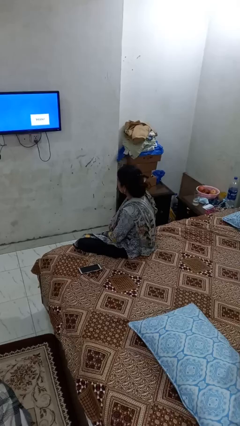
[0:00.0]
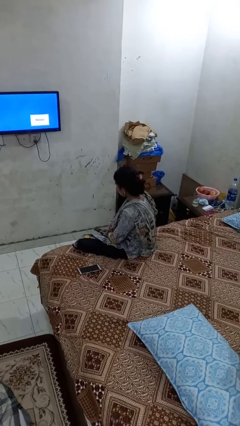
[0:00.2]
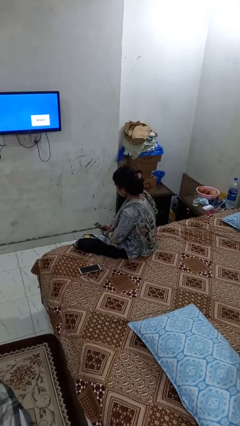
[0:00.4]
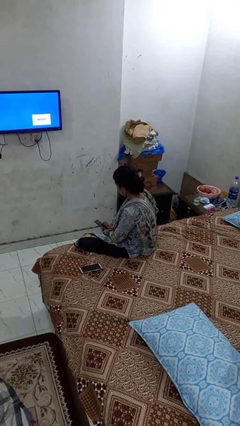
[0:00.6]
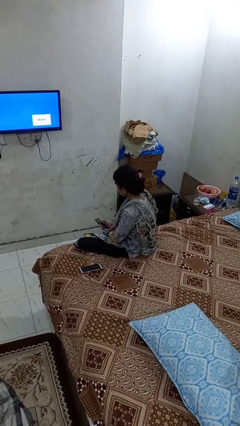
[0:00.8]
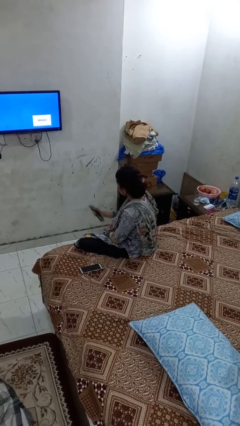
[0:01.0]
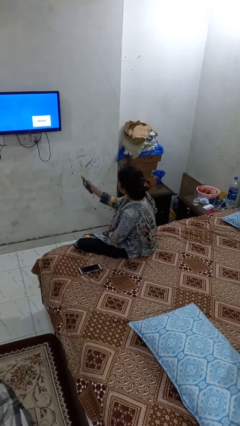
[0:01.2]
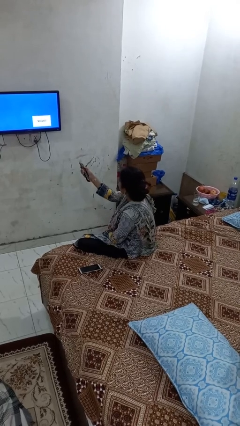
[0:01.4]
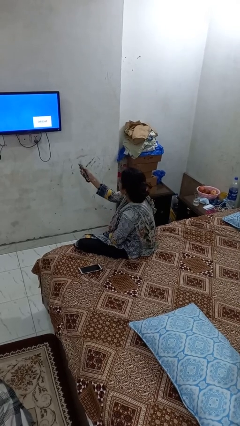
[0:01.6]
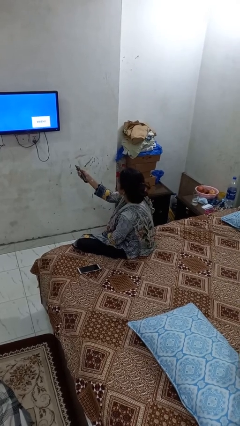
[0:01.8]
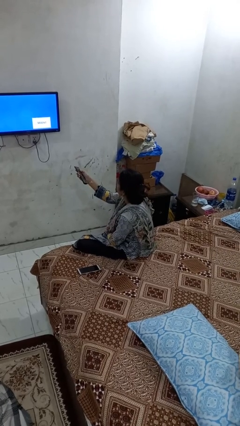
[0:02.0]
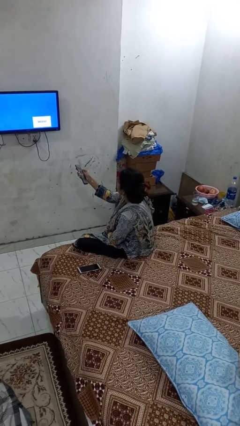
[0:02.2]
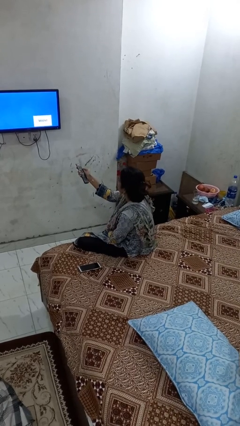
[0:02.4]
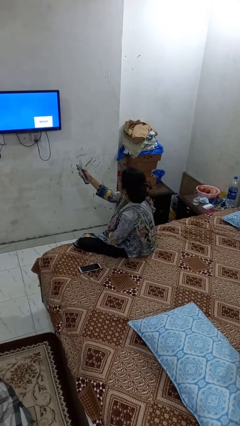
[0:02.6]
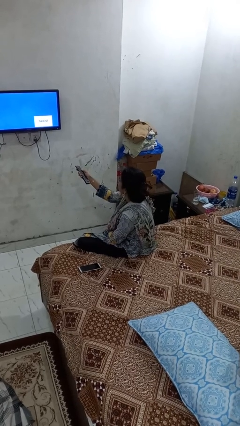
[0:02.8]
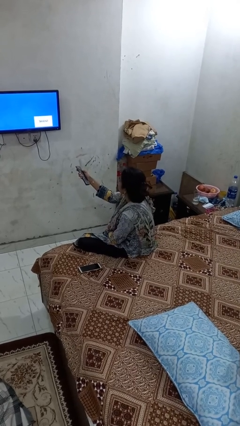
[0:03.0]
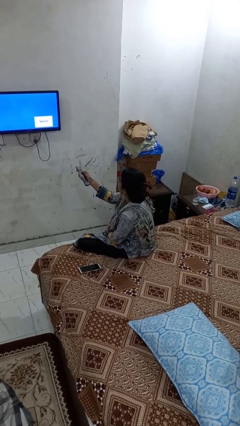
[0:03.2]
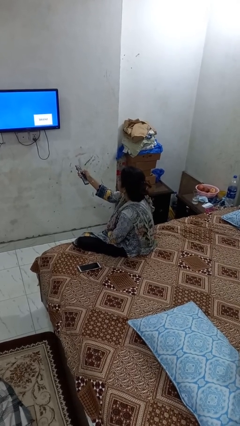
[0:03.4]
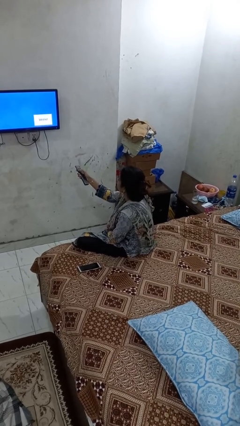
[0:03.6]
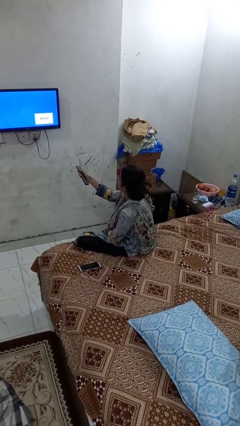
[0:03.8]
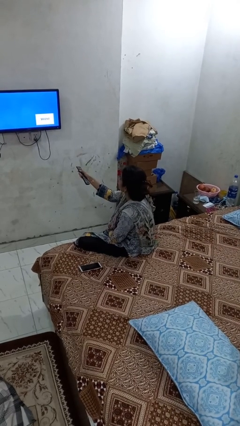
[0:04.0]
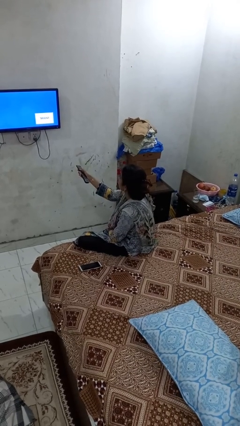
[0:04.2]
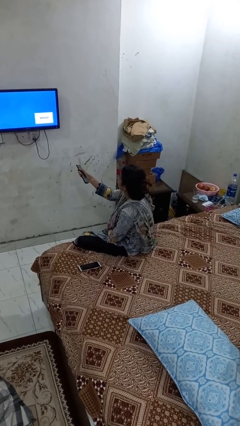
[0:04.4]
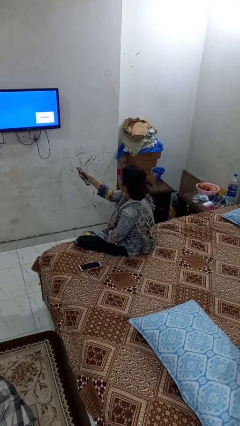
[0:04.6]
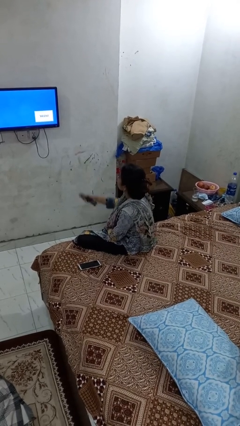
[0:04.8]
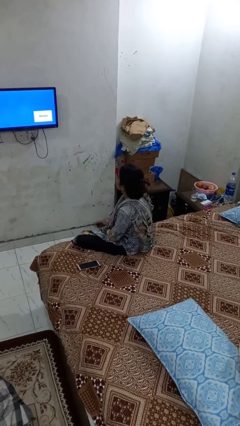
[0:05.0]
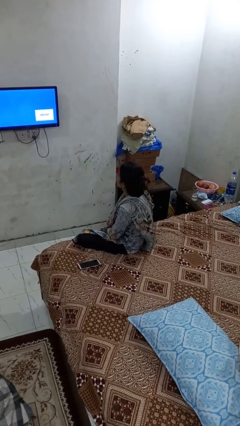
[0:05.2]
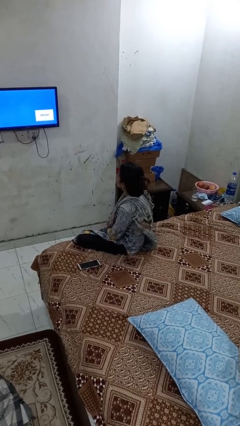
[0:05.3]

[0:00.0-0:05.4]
person uses television remote

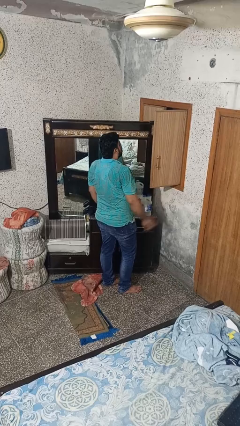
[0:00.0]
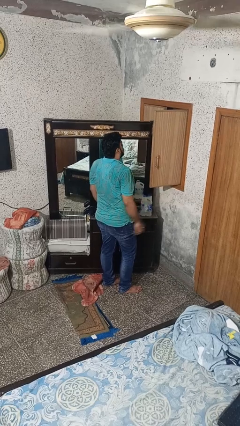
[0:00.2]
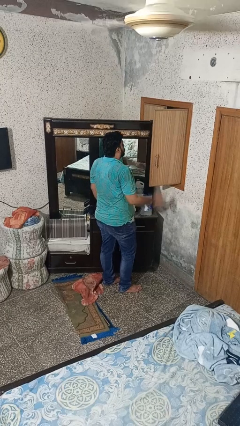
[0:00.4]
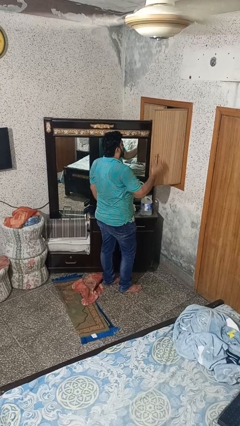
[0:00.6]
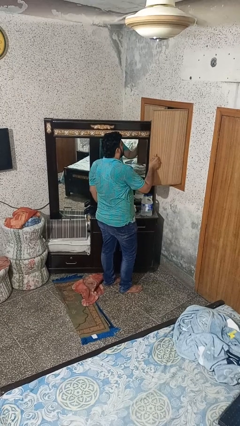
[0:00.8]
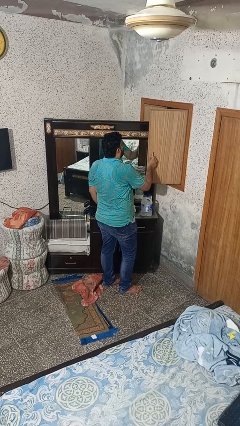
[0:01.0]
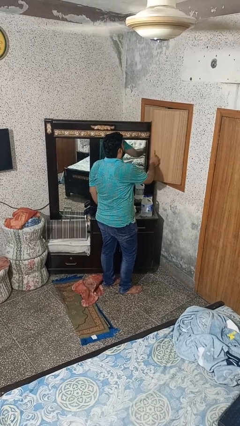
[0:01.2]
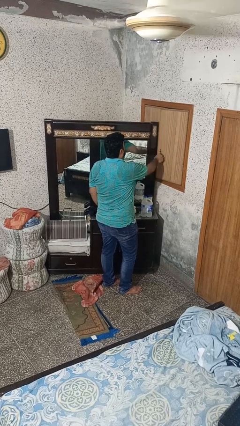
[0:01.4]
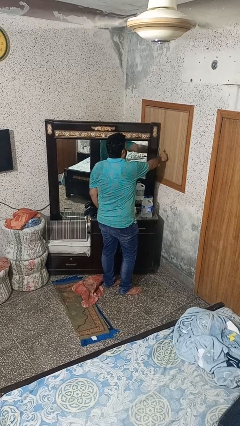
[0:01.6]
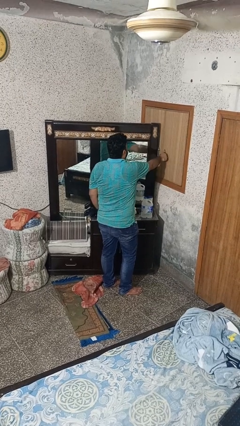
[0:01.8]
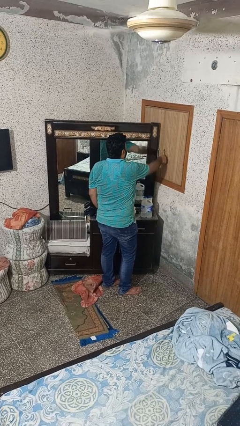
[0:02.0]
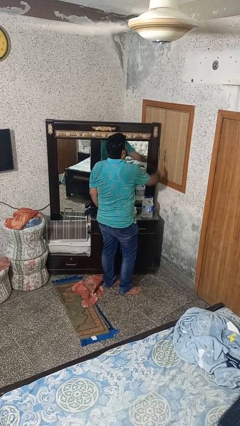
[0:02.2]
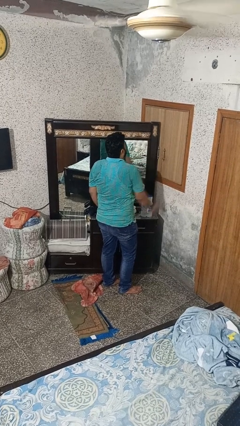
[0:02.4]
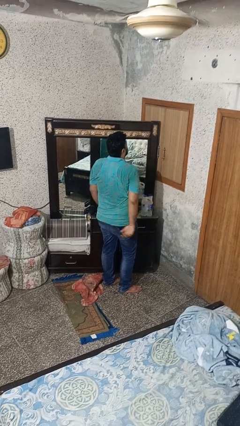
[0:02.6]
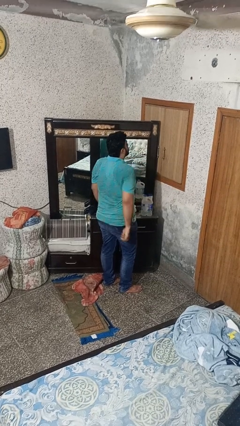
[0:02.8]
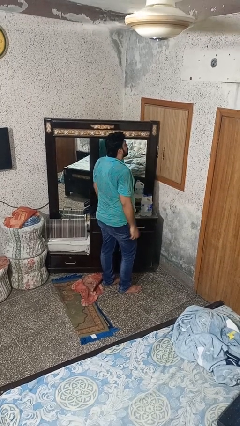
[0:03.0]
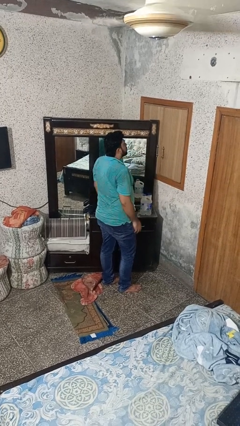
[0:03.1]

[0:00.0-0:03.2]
person closes home window

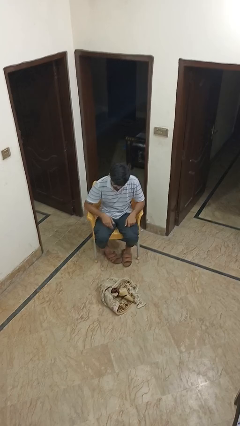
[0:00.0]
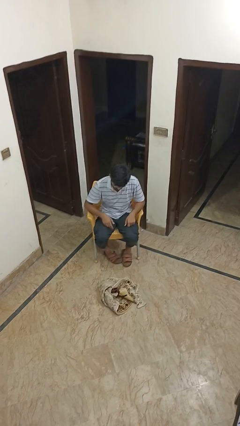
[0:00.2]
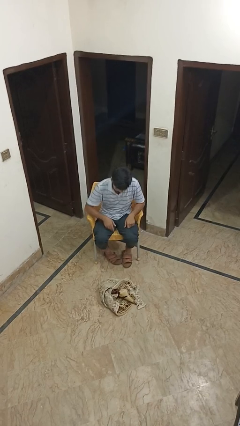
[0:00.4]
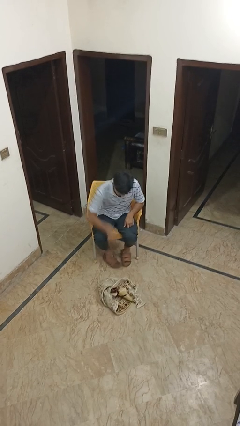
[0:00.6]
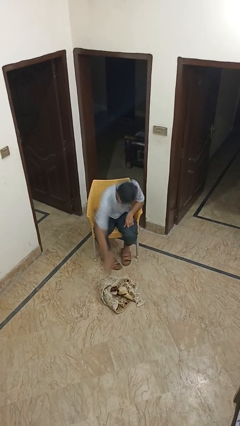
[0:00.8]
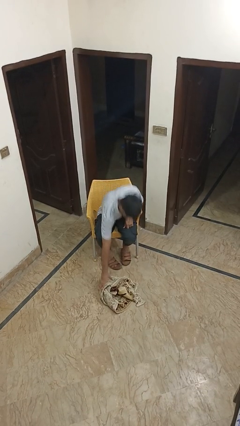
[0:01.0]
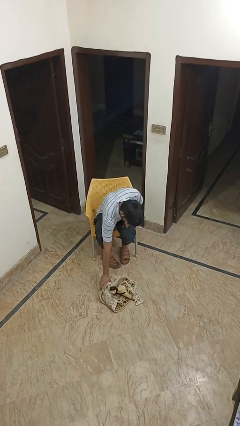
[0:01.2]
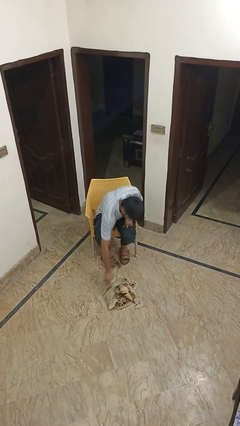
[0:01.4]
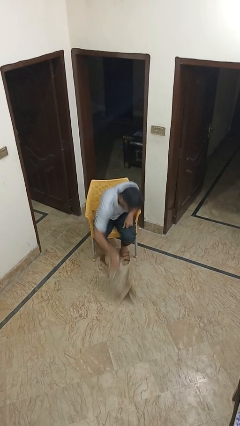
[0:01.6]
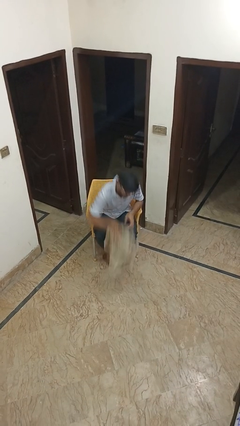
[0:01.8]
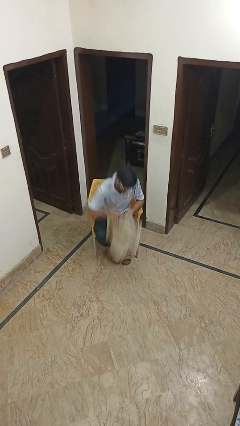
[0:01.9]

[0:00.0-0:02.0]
person picks up object from floor

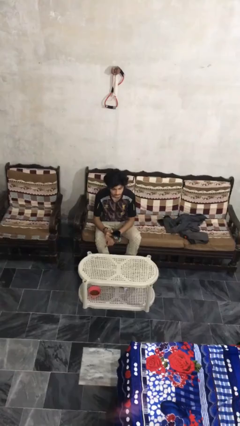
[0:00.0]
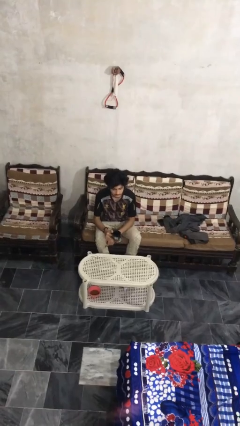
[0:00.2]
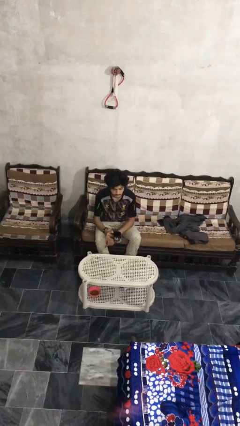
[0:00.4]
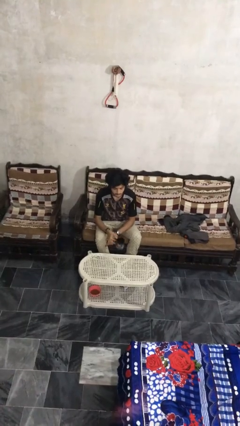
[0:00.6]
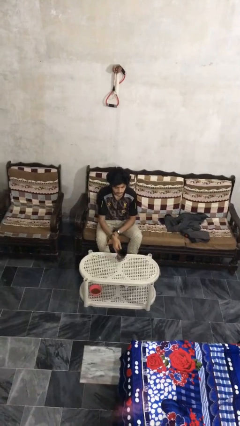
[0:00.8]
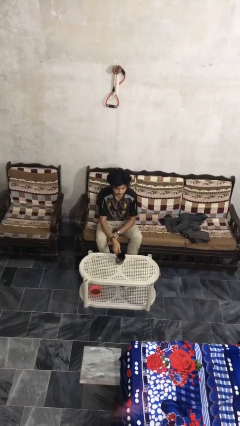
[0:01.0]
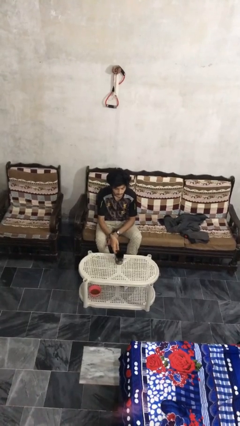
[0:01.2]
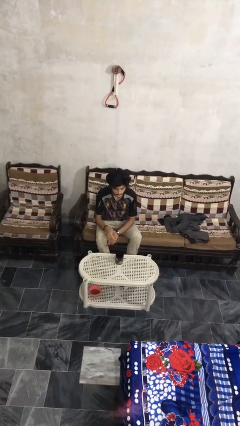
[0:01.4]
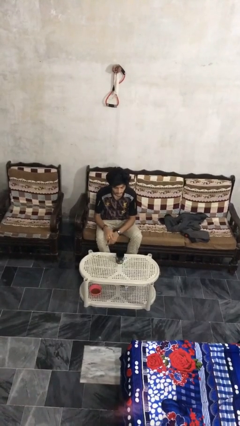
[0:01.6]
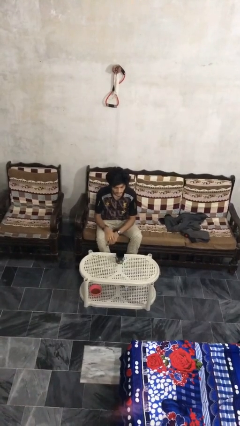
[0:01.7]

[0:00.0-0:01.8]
person puts down object on table

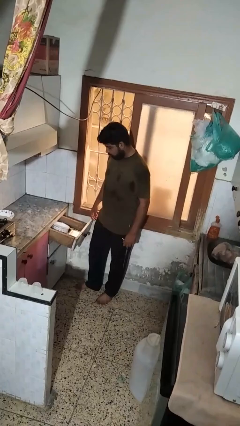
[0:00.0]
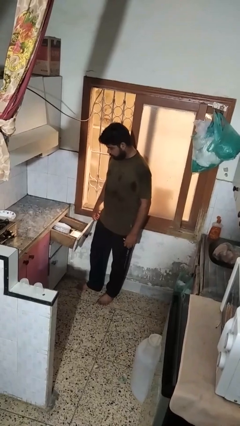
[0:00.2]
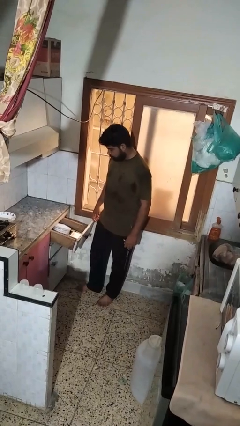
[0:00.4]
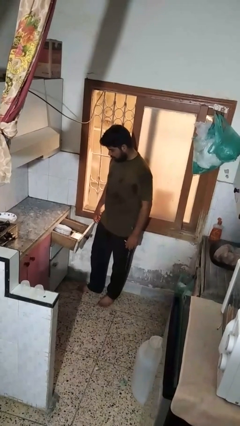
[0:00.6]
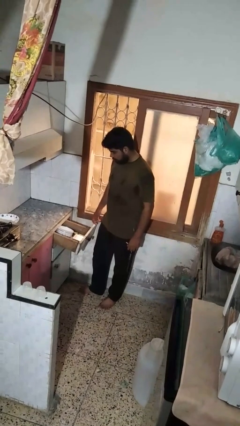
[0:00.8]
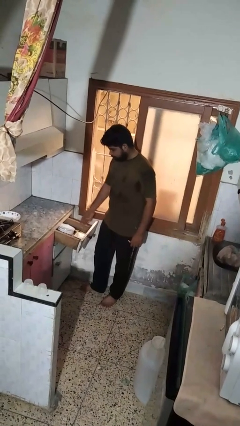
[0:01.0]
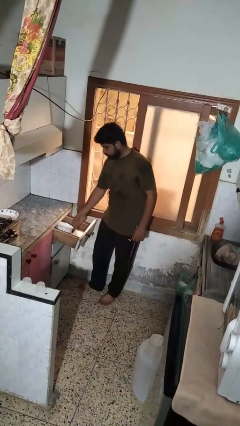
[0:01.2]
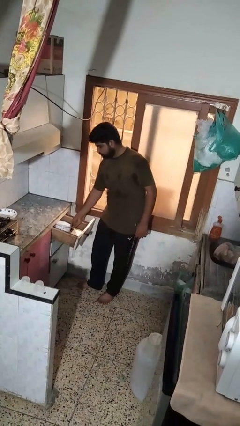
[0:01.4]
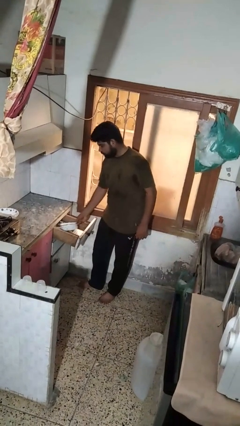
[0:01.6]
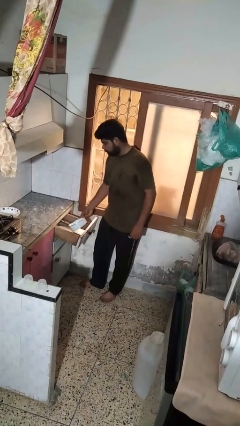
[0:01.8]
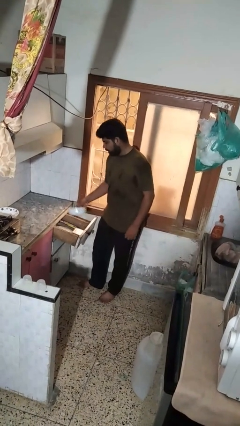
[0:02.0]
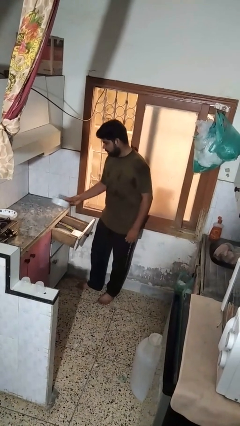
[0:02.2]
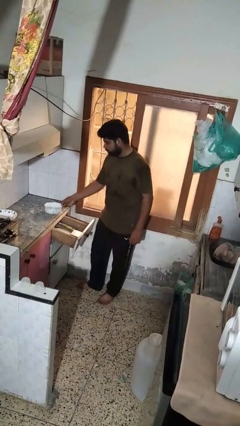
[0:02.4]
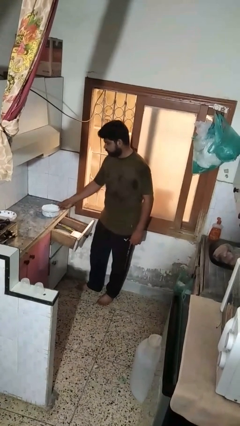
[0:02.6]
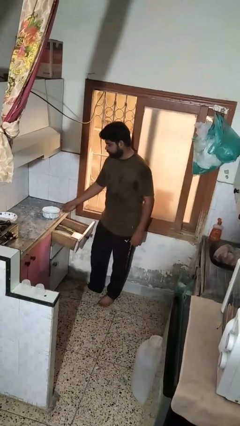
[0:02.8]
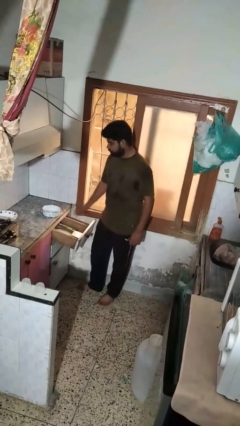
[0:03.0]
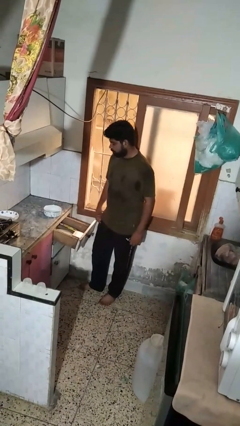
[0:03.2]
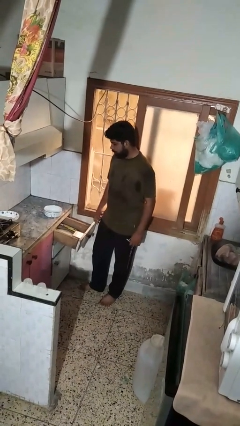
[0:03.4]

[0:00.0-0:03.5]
person takes object from kitchen drawer

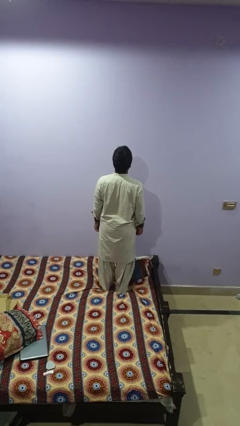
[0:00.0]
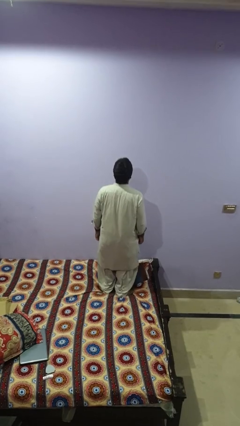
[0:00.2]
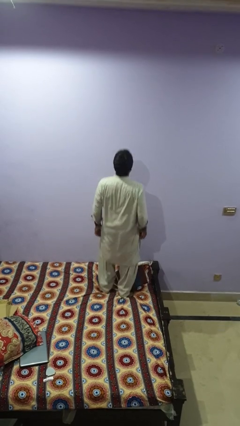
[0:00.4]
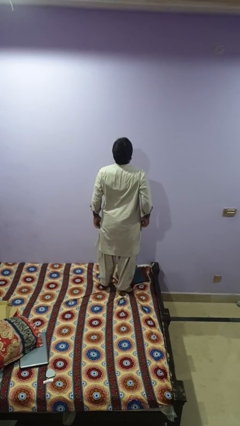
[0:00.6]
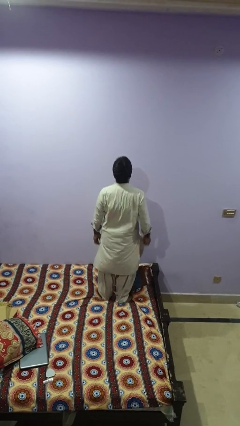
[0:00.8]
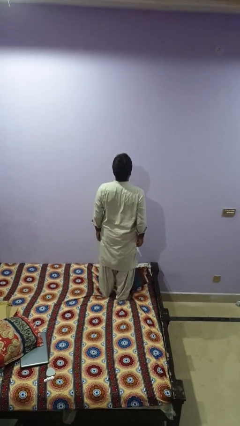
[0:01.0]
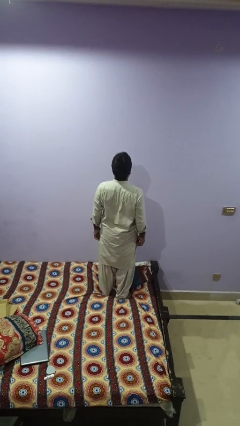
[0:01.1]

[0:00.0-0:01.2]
person jumps on bed
